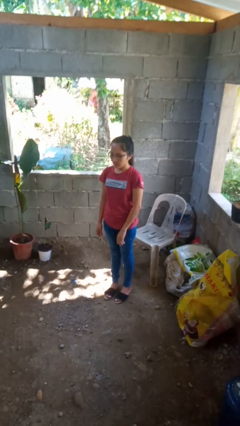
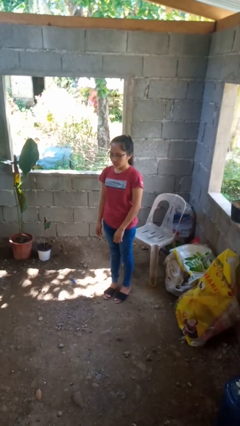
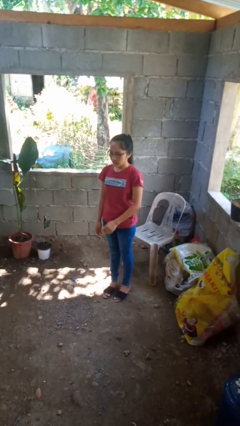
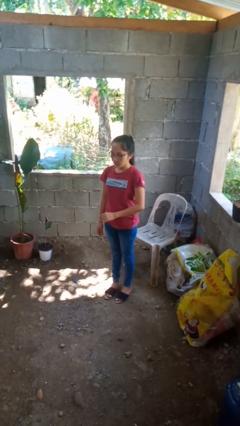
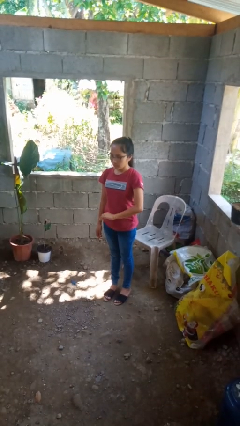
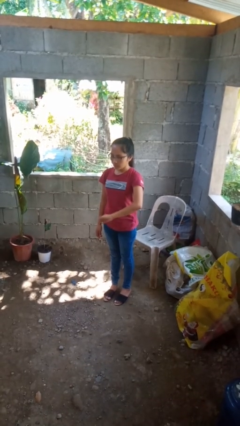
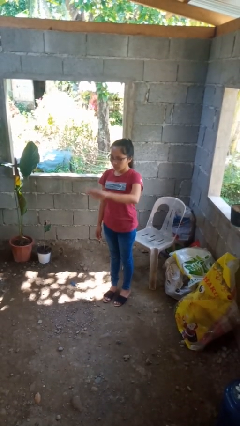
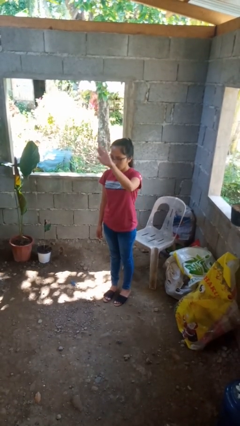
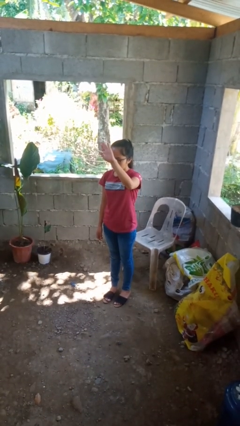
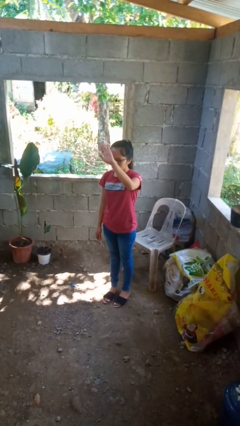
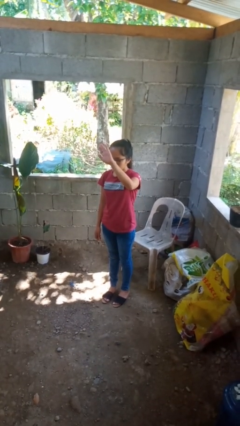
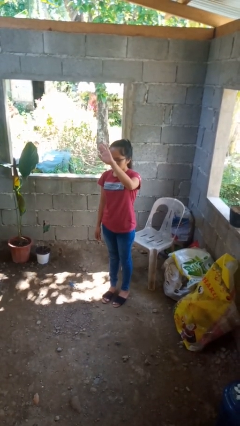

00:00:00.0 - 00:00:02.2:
person gestures swipe up

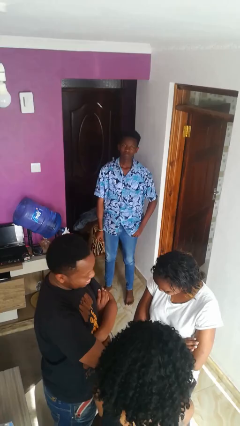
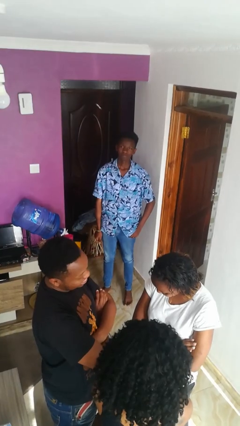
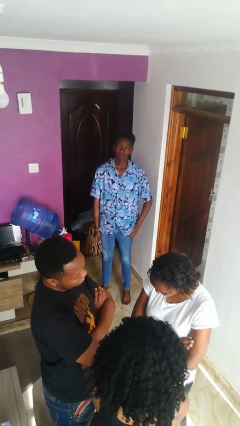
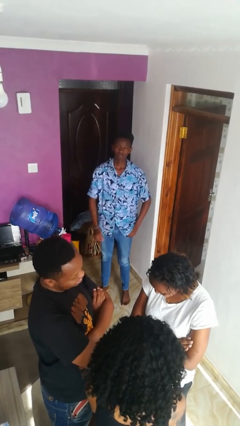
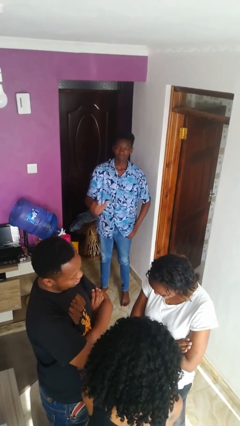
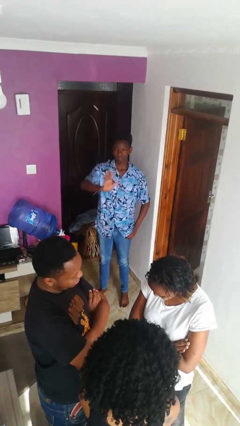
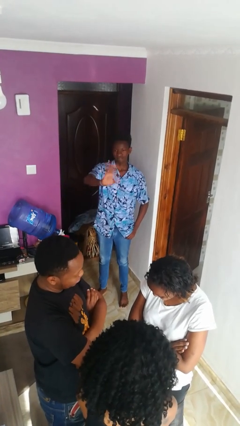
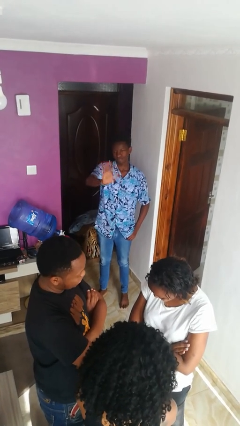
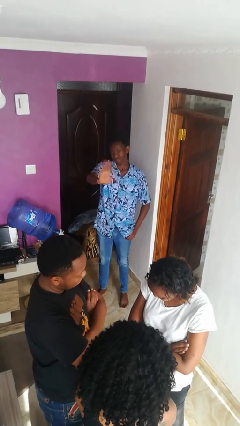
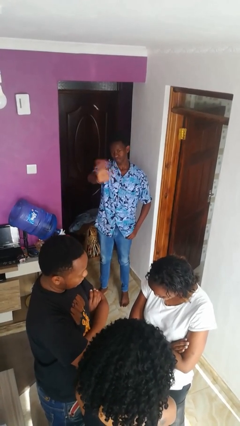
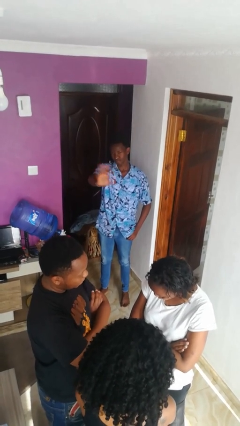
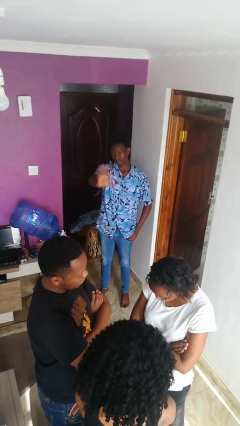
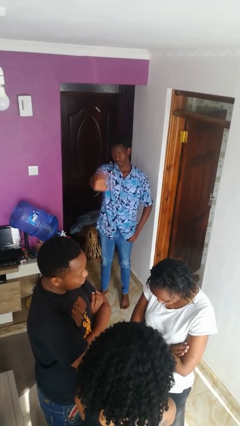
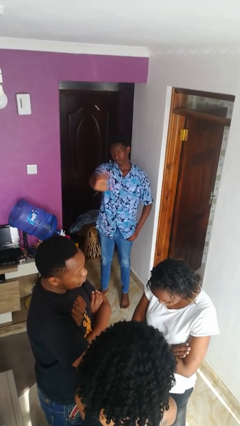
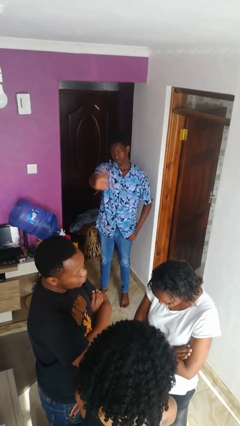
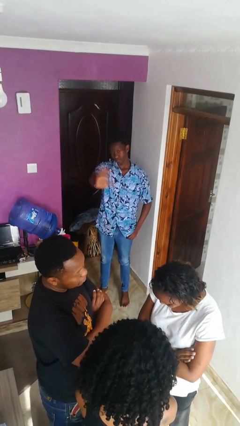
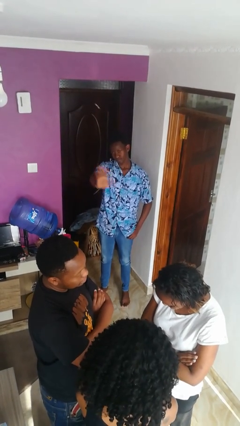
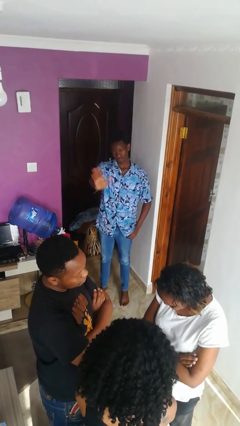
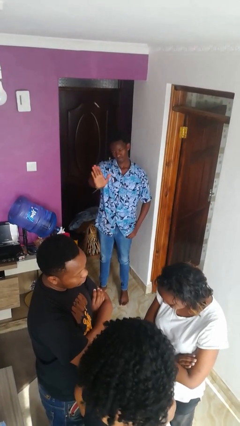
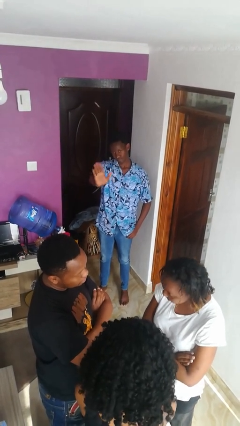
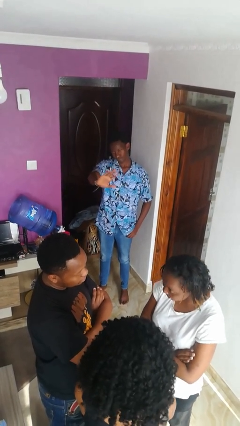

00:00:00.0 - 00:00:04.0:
person waves at person

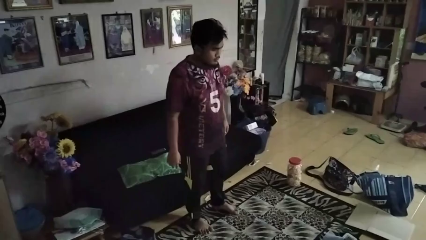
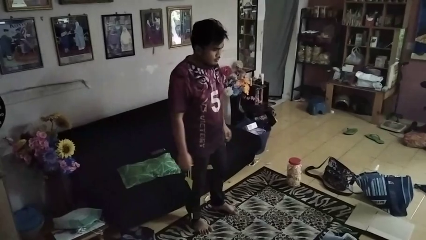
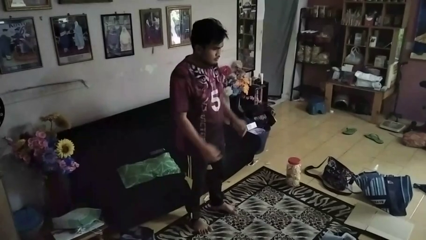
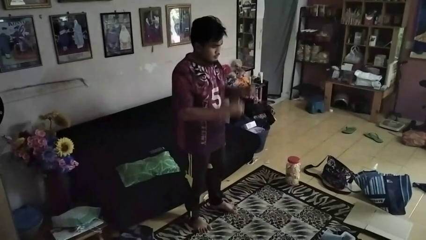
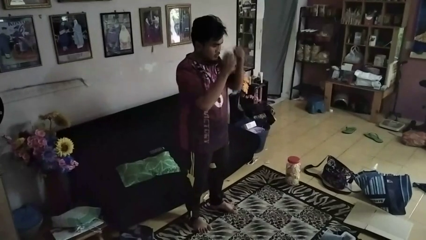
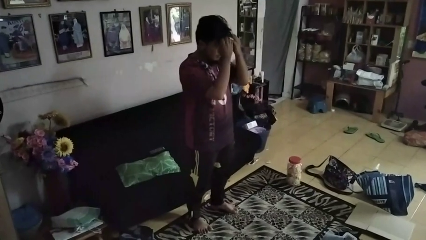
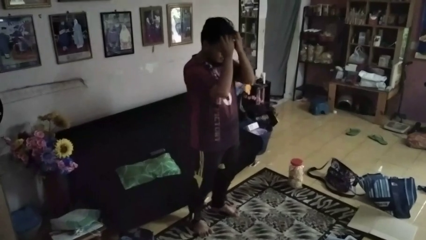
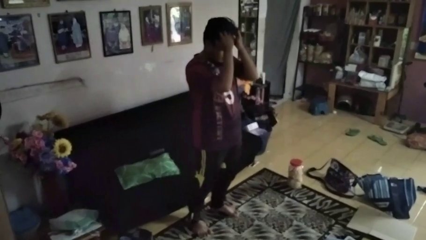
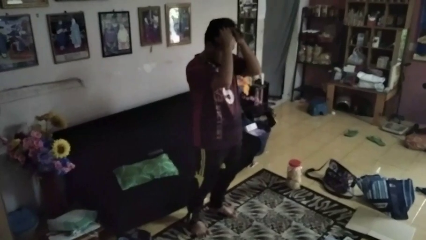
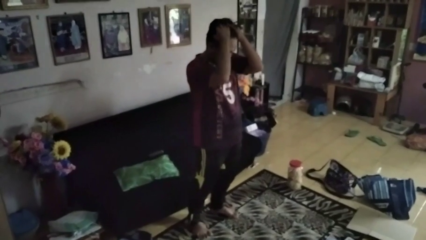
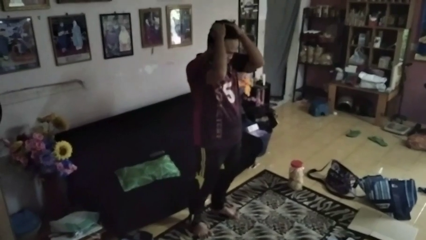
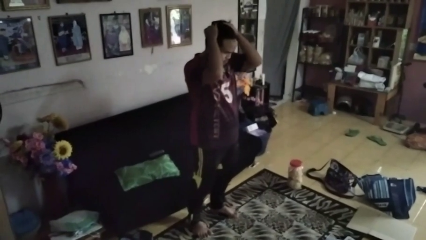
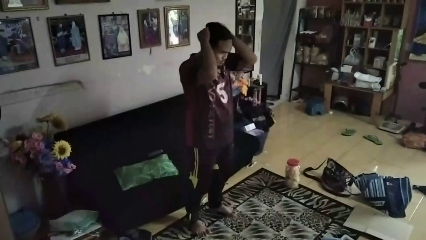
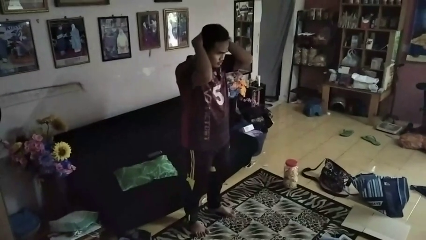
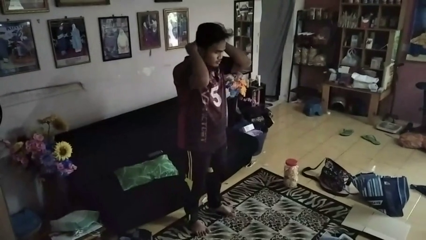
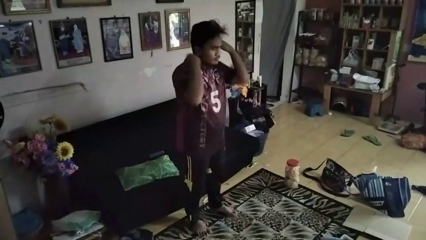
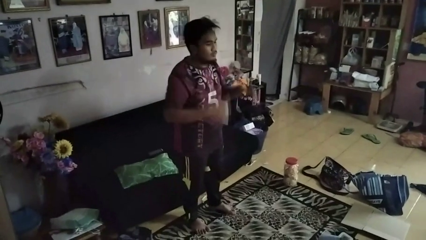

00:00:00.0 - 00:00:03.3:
person strokes hair

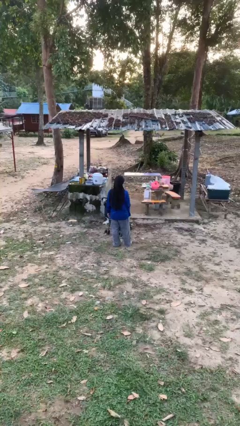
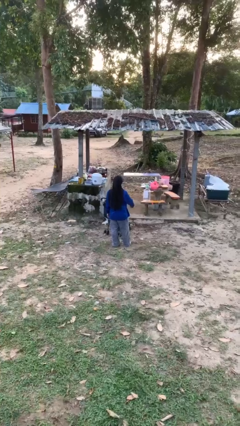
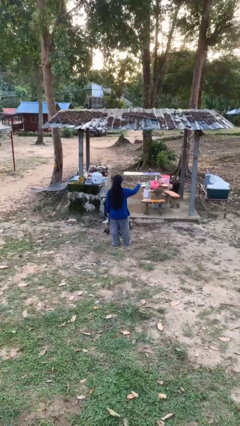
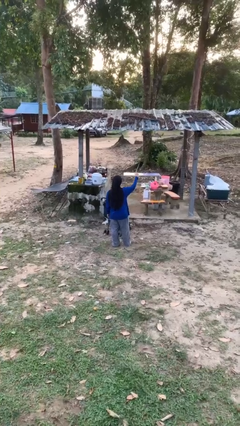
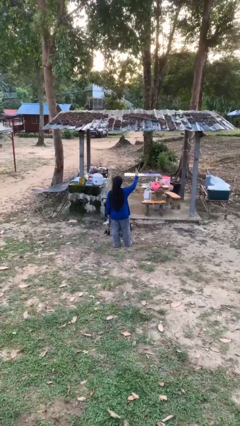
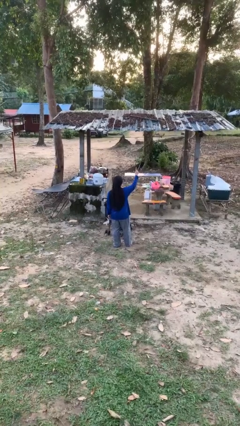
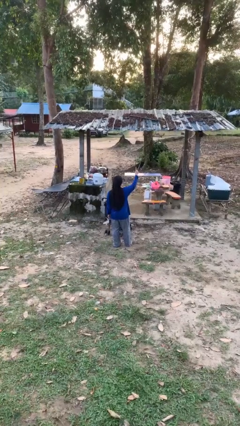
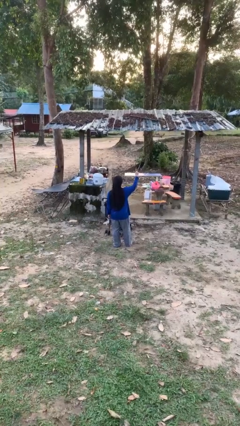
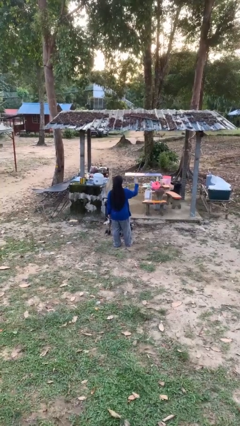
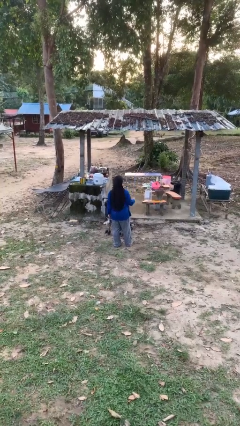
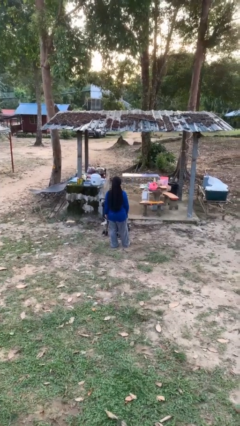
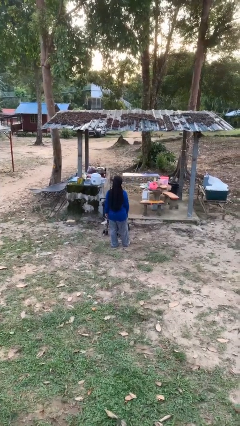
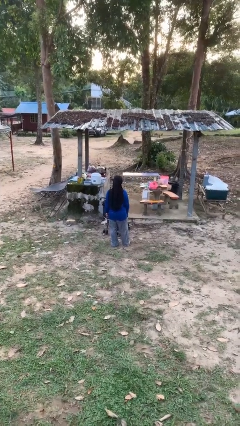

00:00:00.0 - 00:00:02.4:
person gestures number one

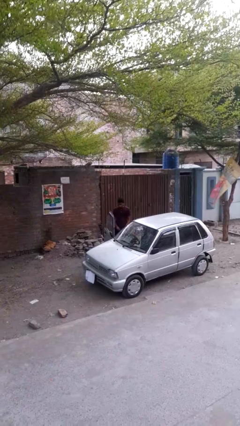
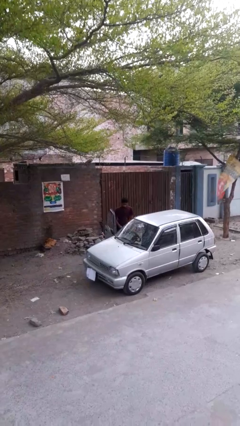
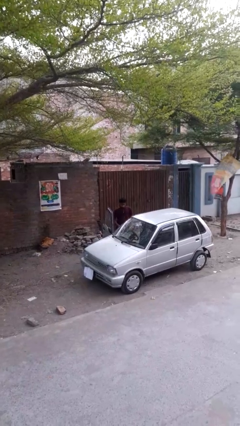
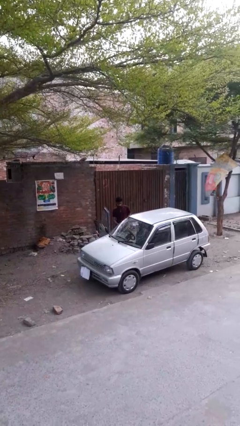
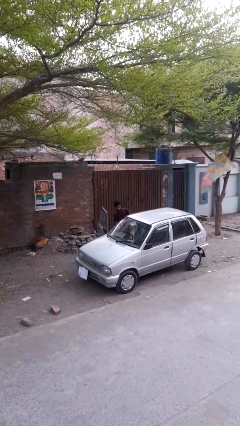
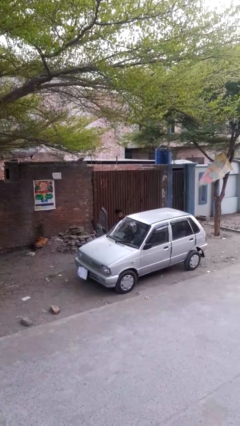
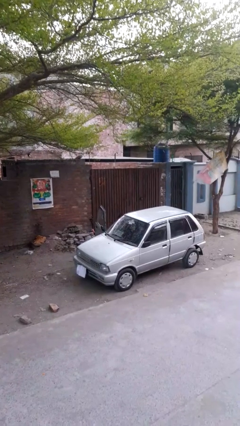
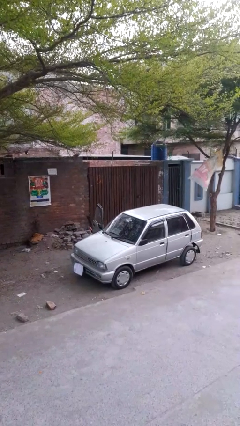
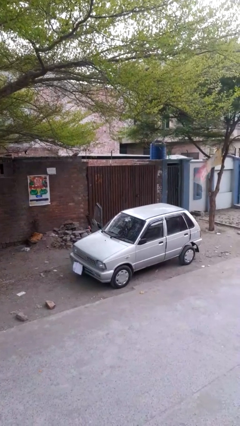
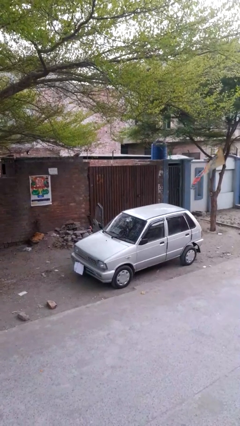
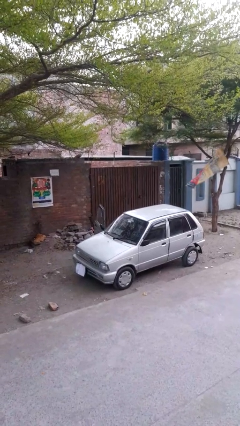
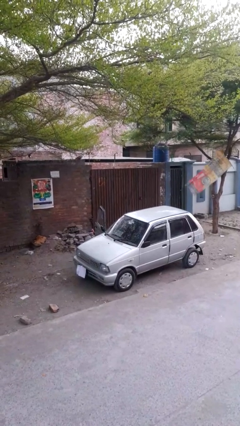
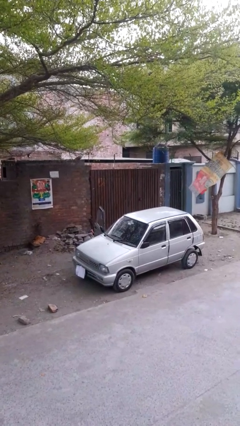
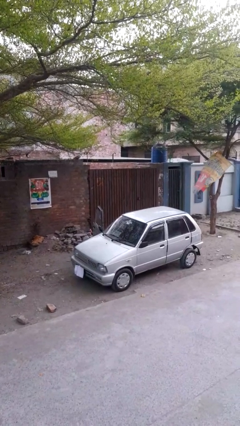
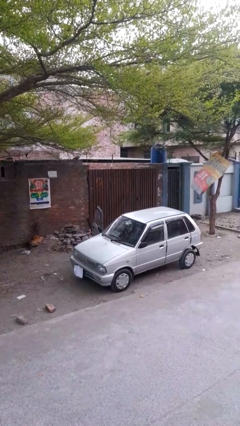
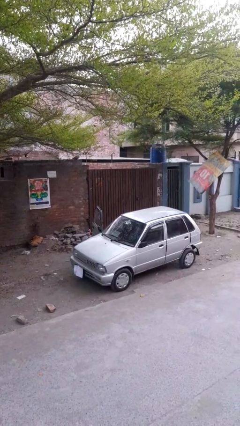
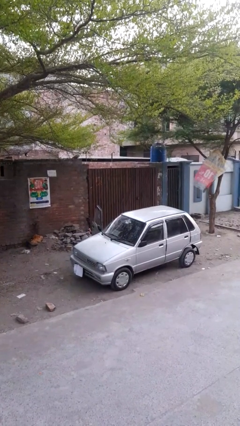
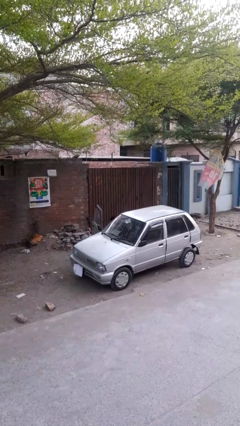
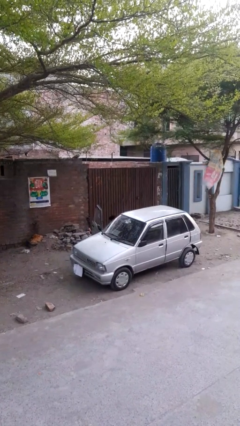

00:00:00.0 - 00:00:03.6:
person enters car

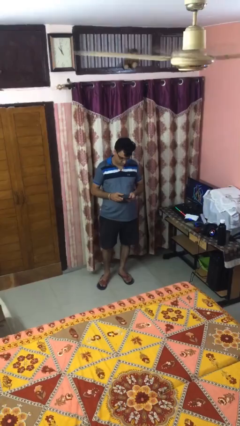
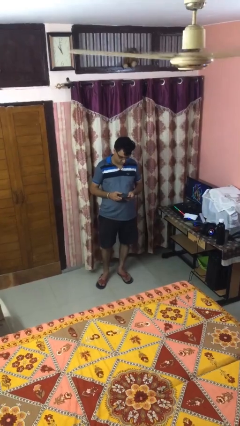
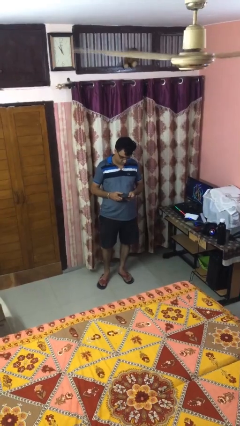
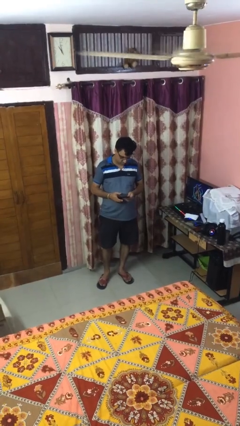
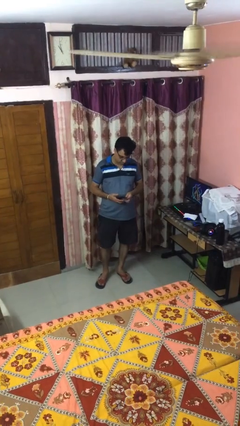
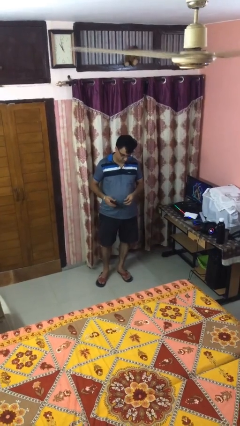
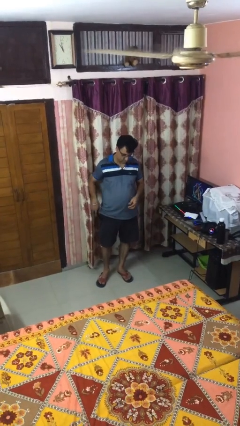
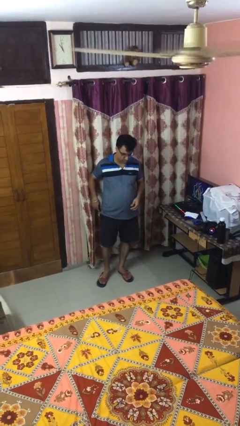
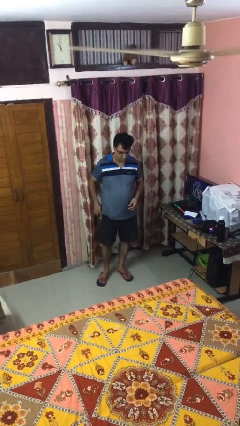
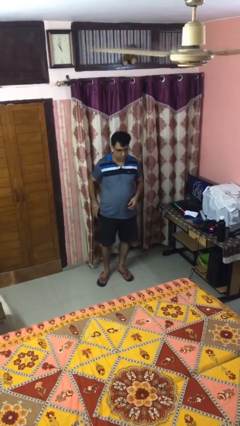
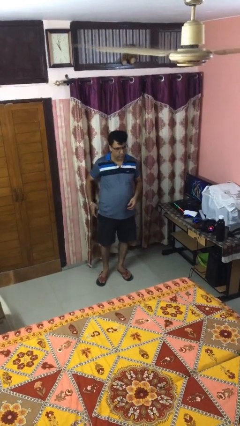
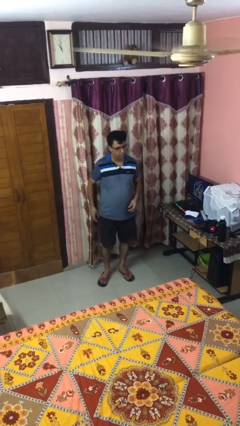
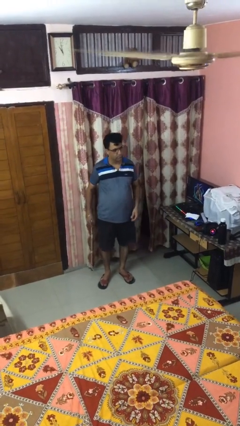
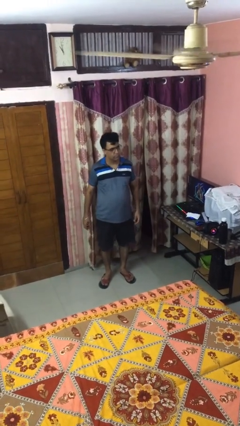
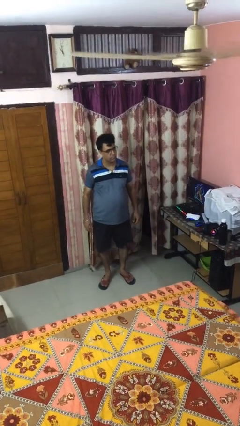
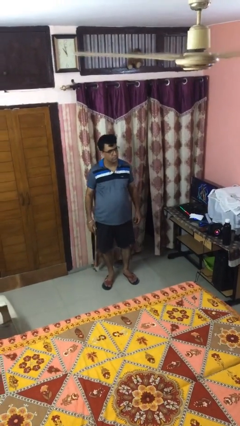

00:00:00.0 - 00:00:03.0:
person puts phone into pocket
